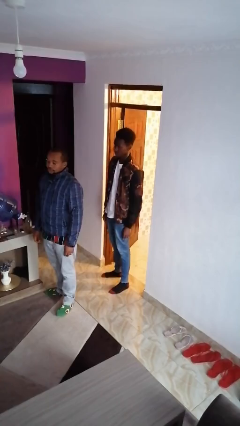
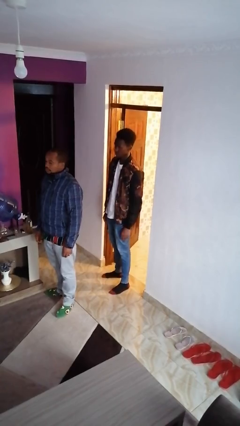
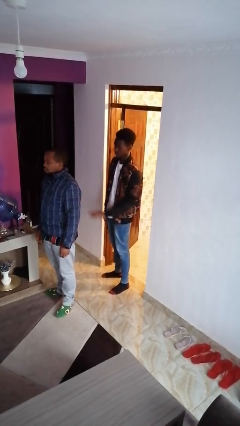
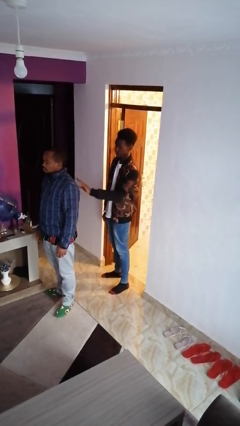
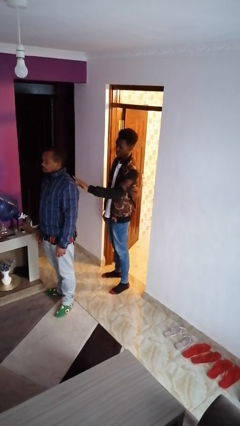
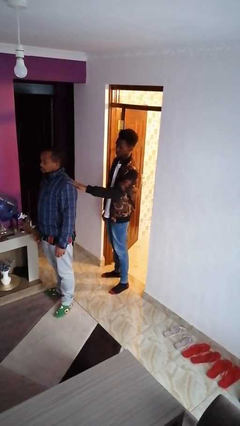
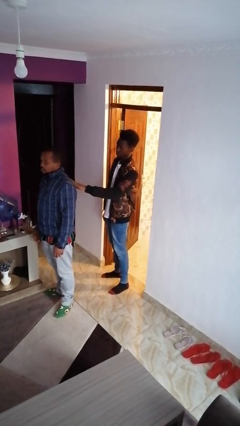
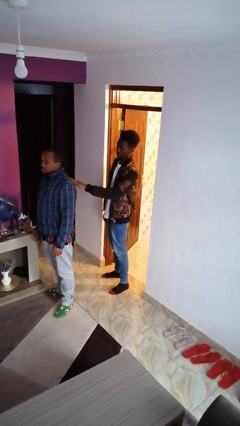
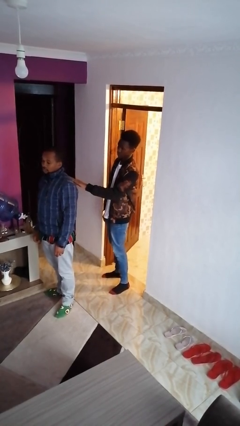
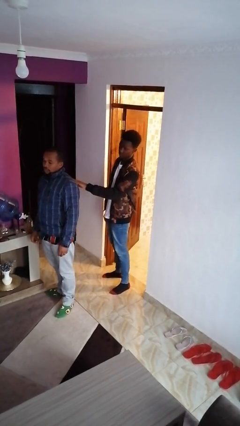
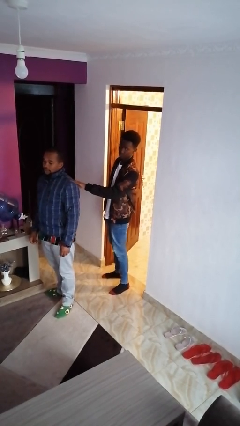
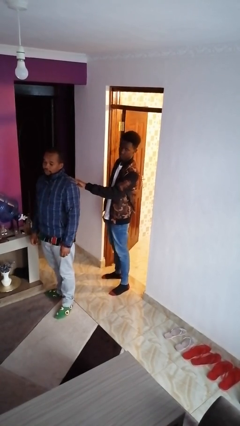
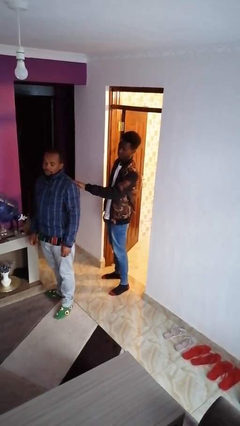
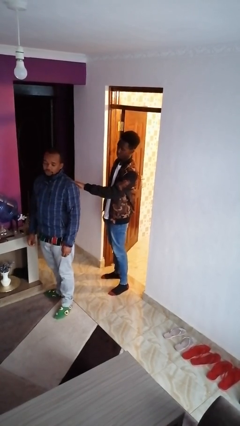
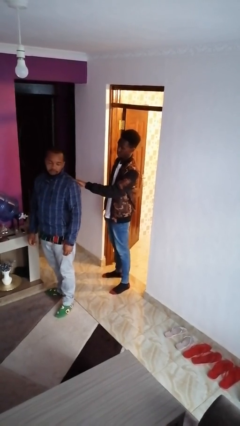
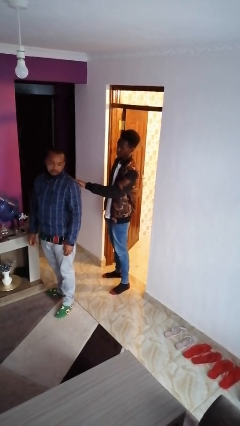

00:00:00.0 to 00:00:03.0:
person touches back of person

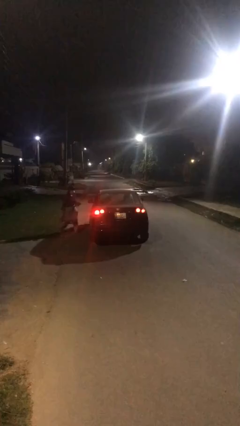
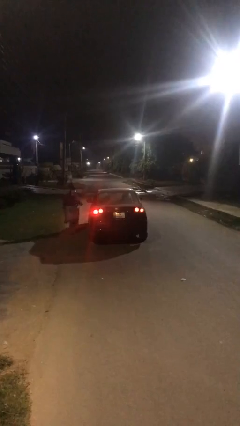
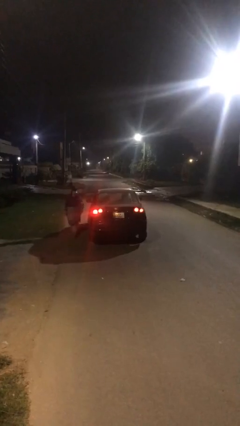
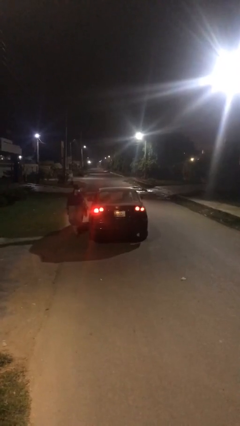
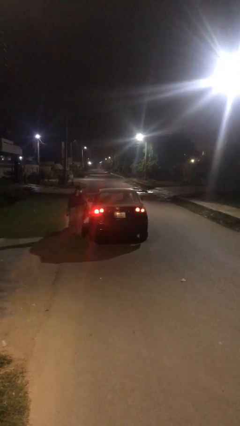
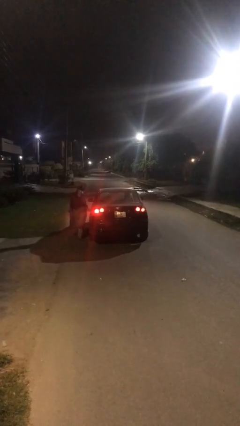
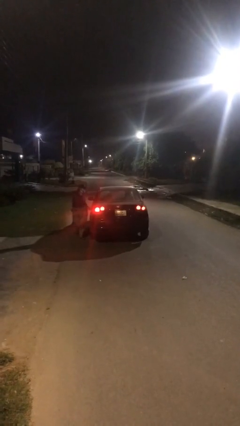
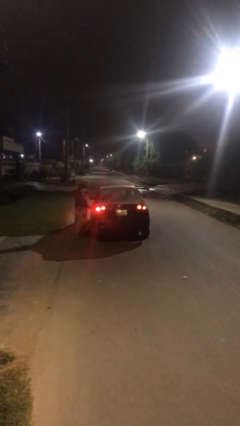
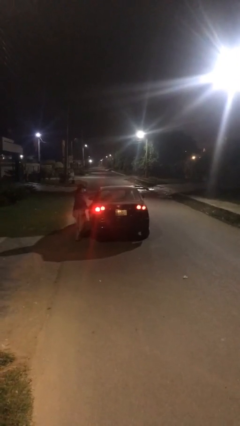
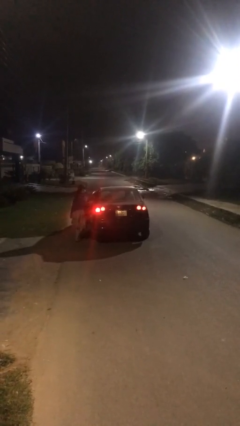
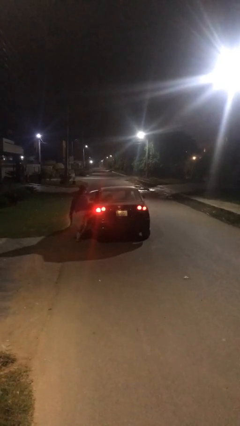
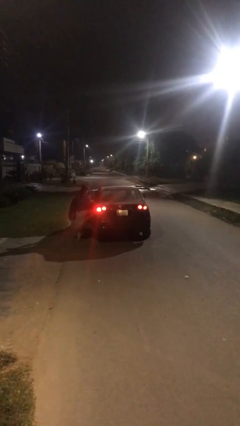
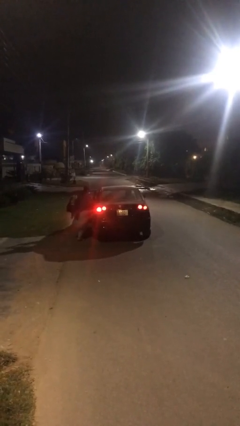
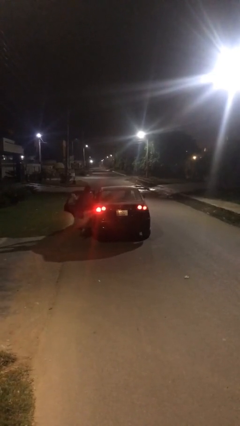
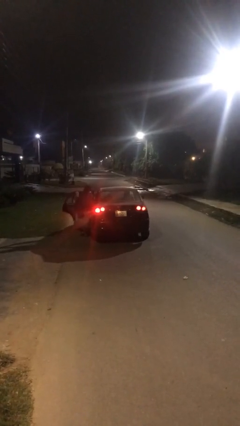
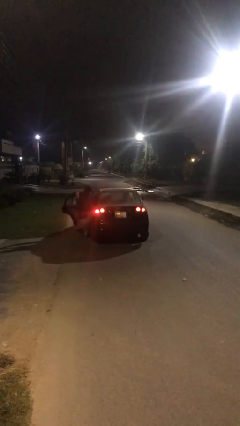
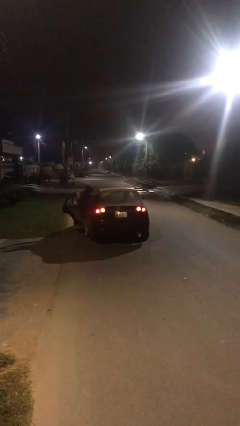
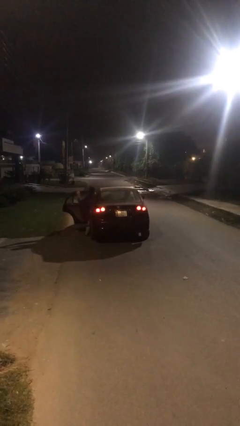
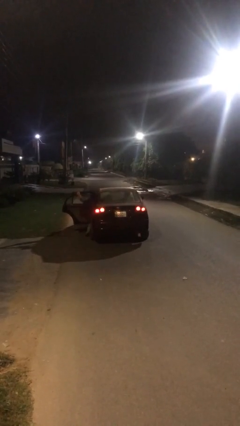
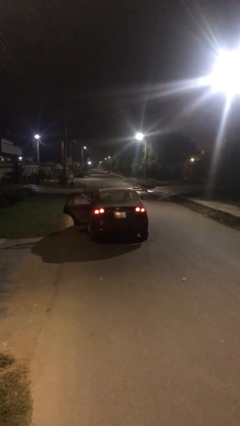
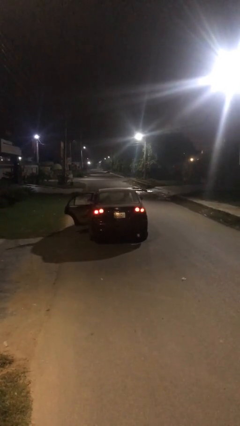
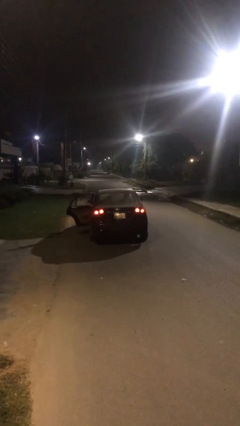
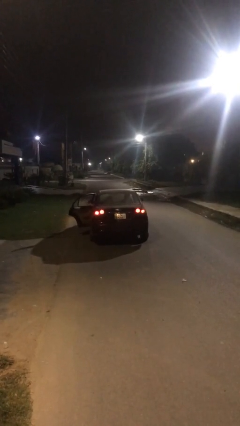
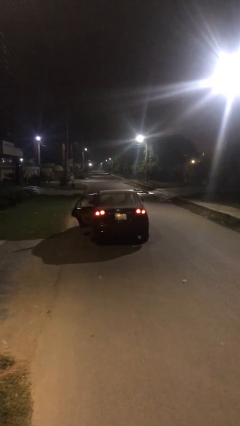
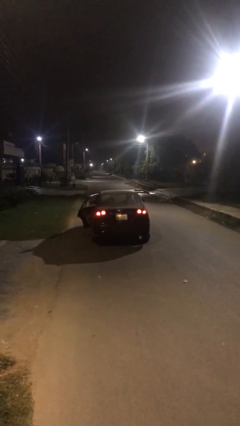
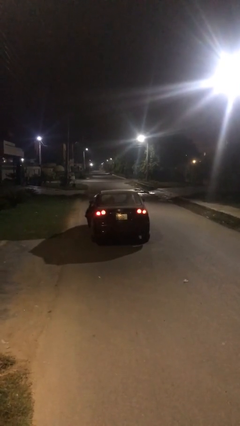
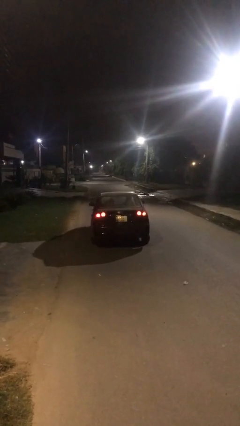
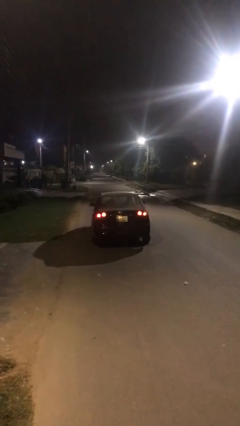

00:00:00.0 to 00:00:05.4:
car picks up person

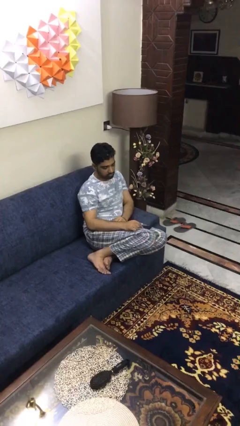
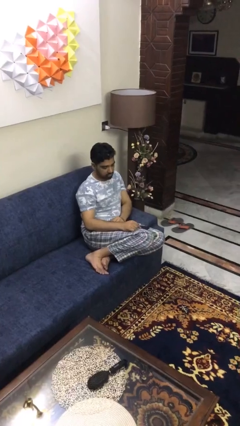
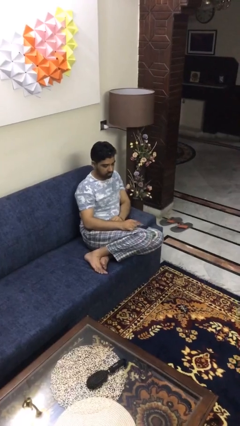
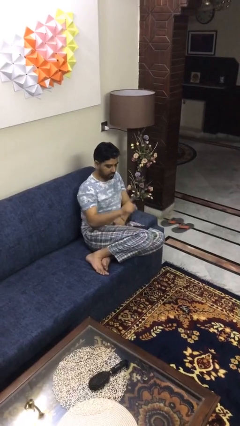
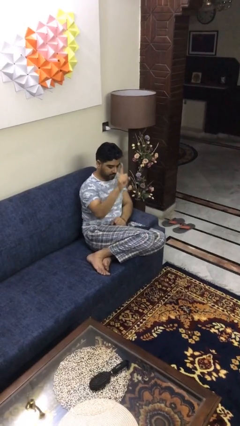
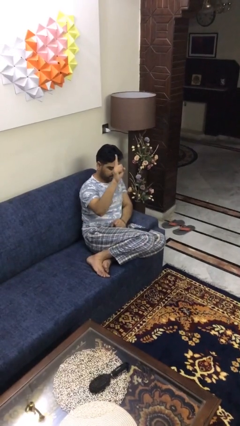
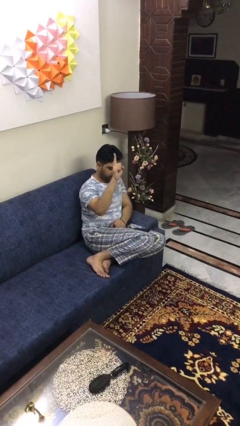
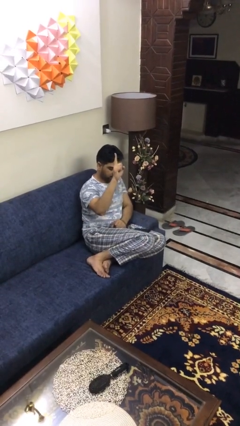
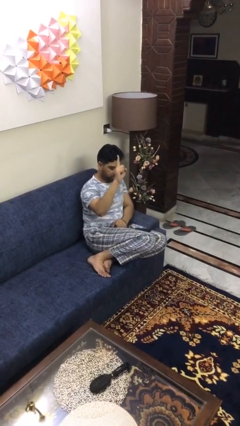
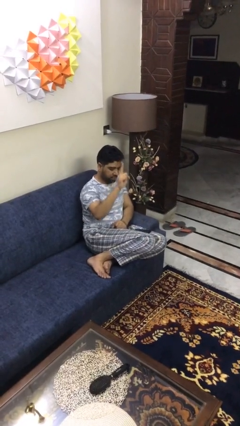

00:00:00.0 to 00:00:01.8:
person gestures number one

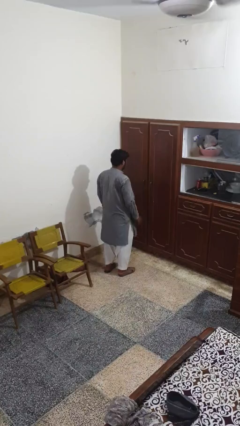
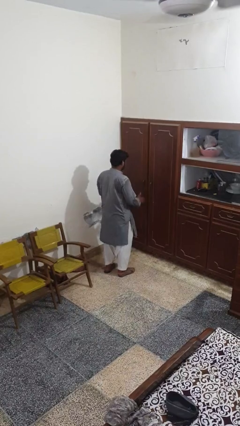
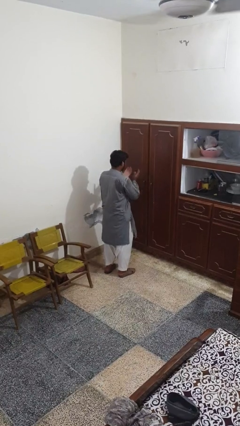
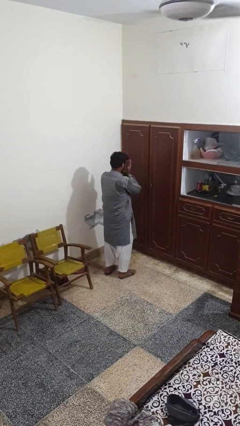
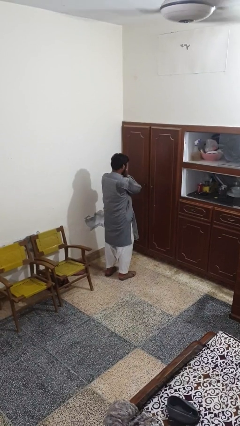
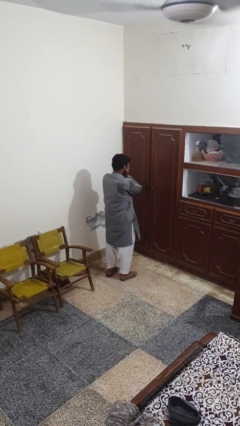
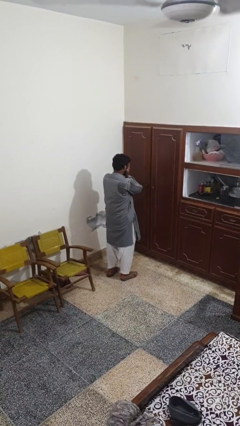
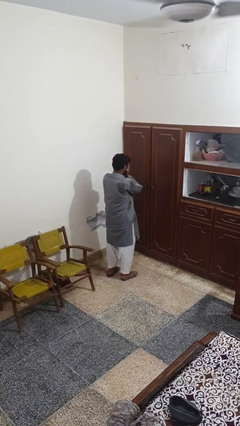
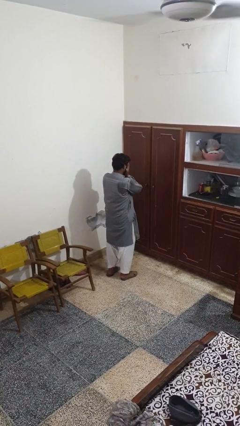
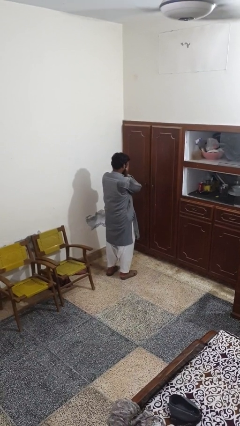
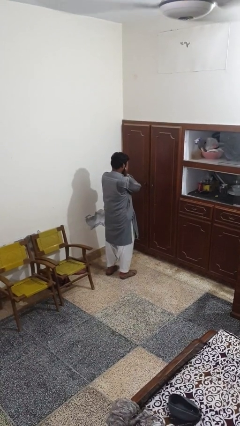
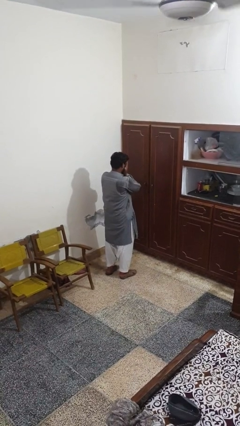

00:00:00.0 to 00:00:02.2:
person covers face with hands

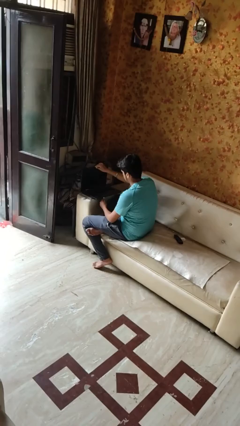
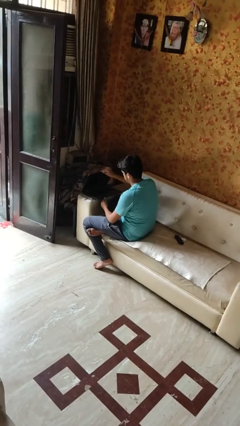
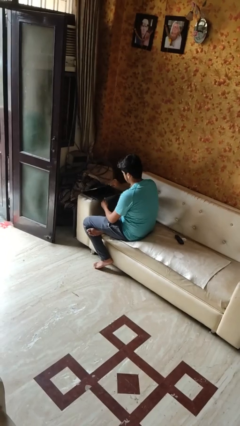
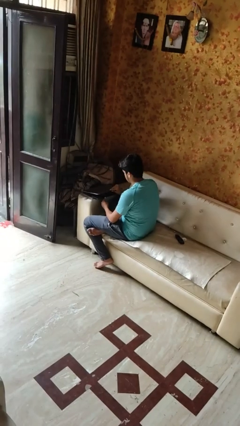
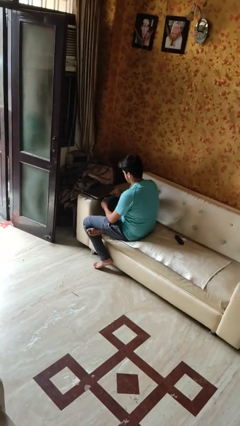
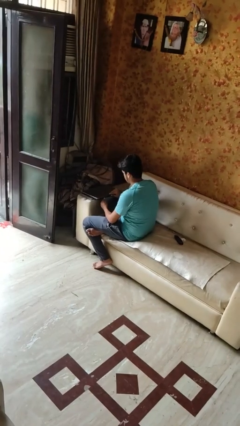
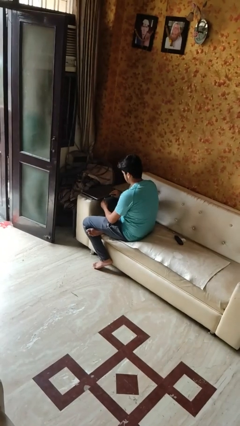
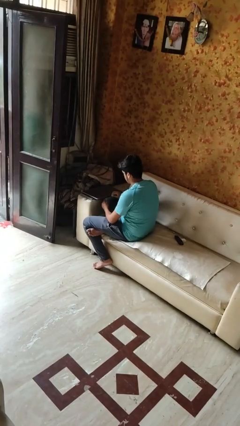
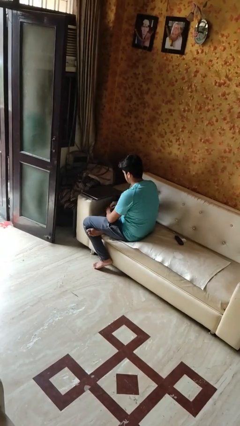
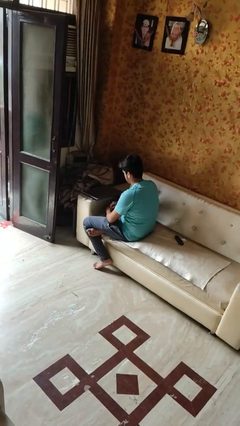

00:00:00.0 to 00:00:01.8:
person closes laptop

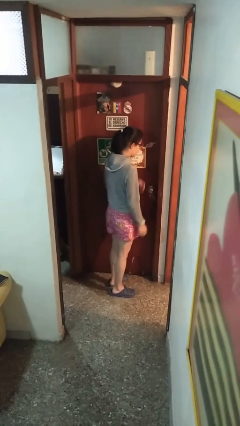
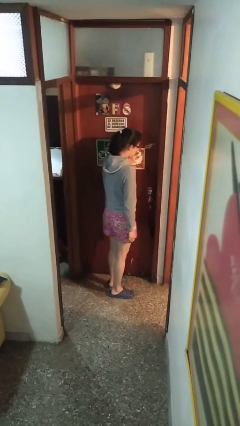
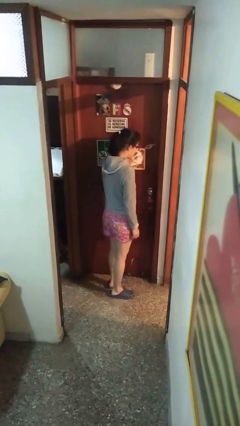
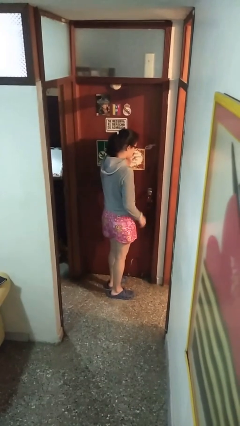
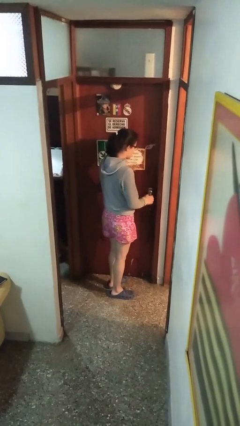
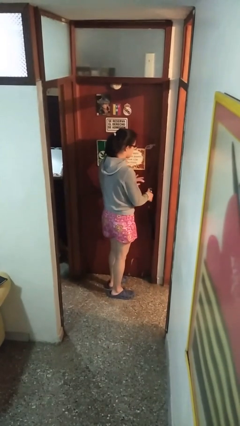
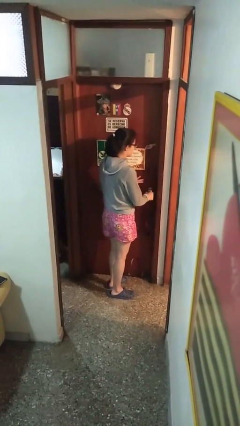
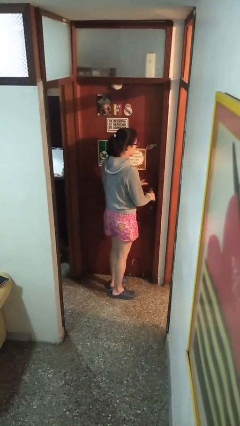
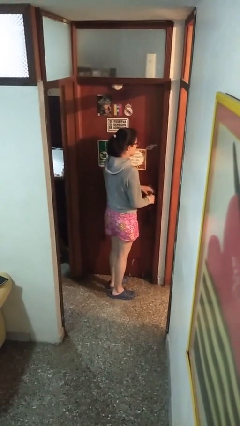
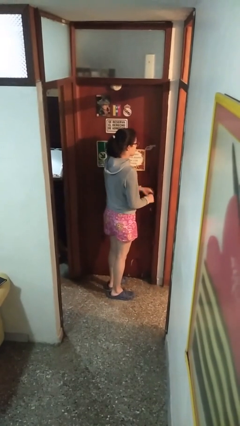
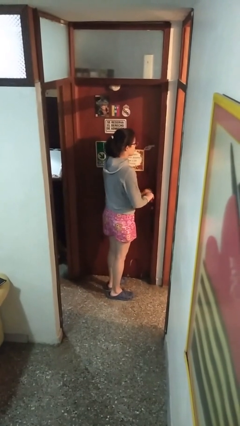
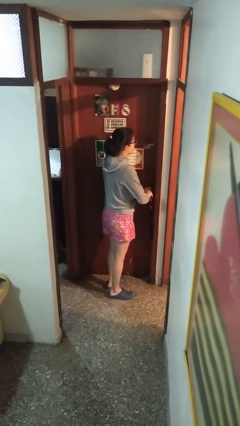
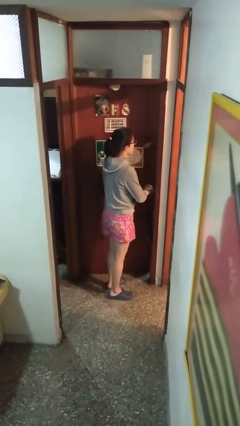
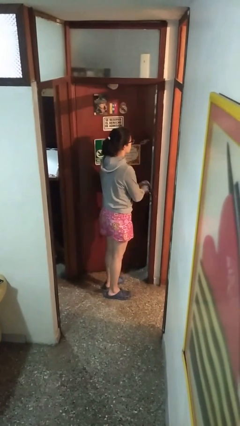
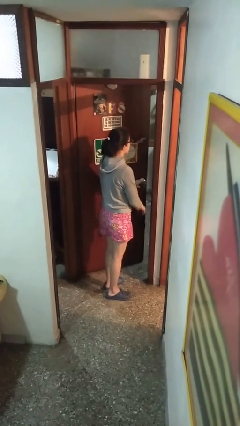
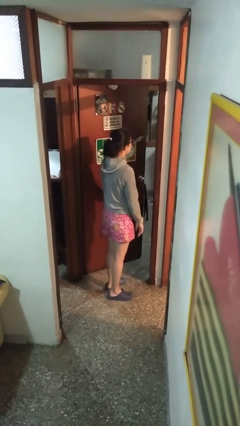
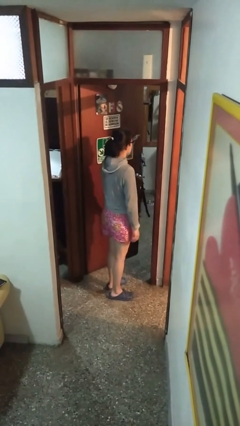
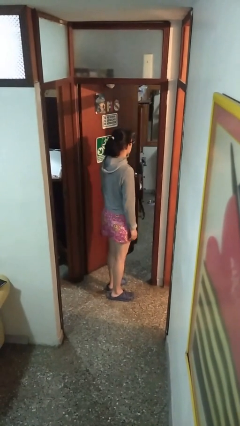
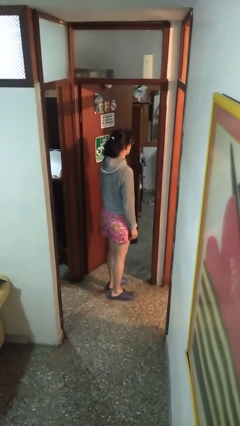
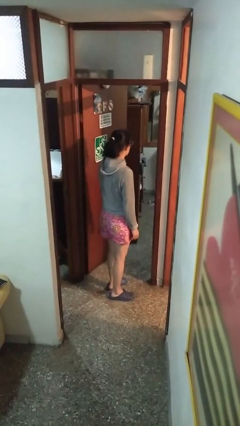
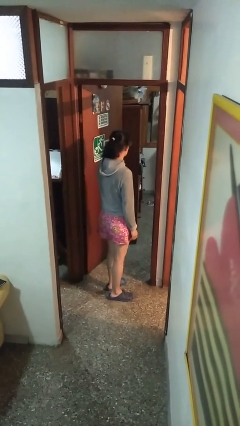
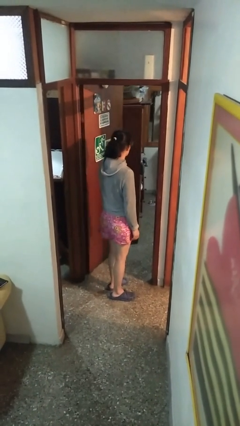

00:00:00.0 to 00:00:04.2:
person opens facility door
